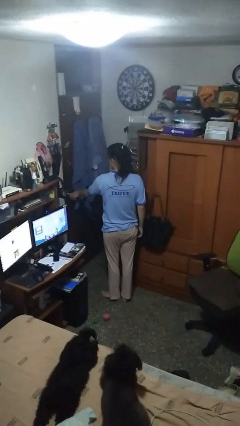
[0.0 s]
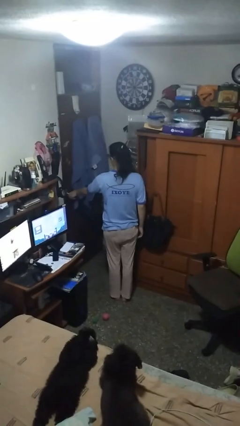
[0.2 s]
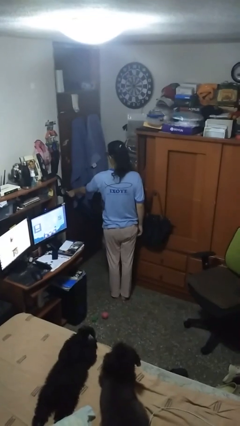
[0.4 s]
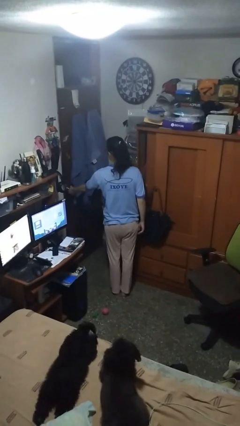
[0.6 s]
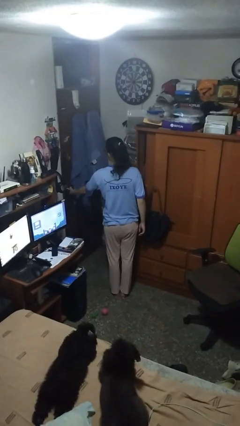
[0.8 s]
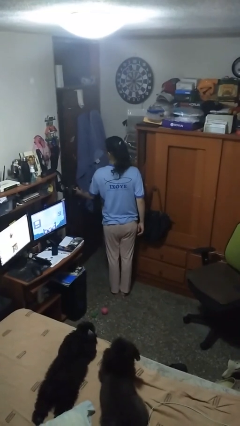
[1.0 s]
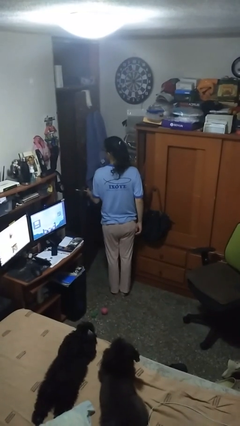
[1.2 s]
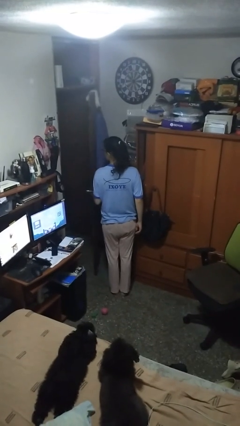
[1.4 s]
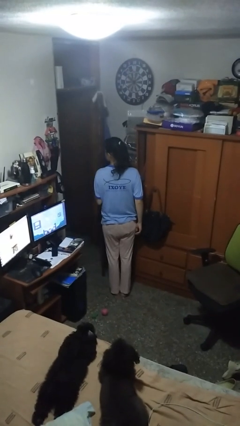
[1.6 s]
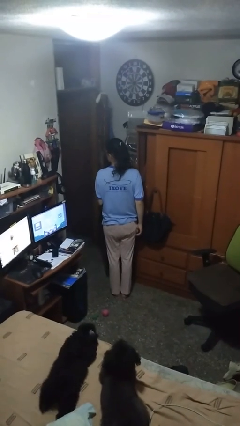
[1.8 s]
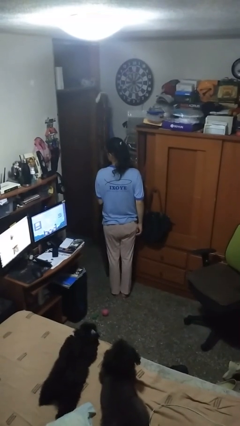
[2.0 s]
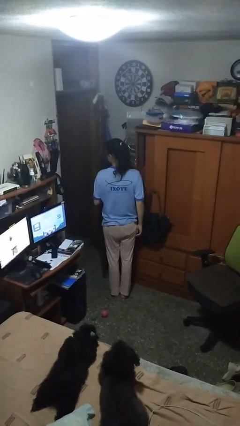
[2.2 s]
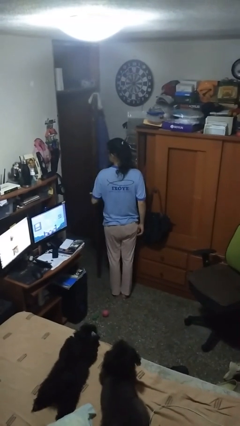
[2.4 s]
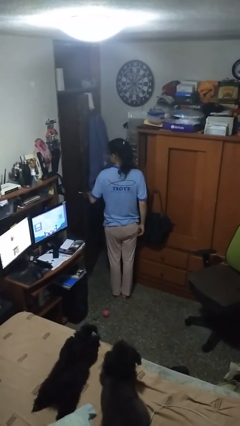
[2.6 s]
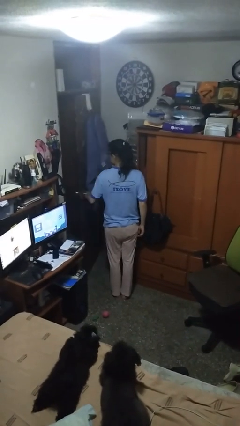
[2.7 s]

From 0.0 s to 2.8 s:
person opens facility door

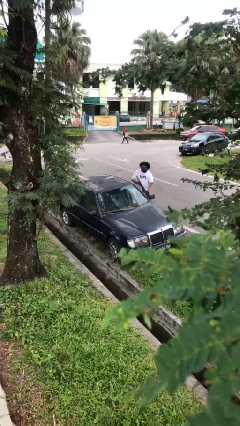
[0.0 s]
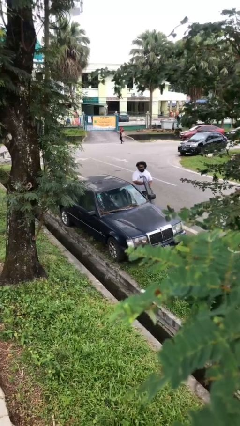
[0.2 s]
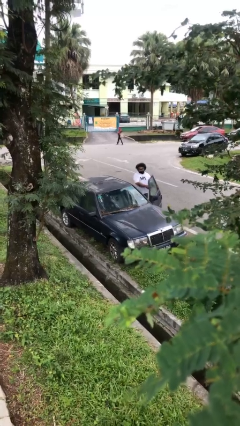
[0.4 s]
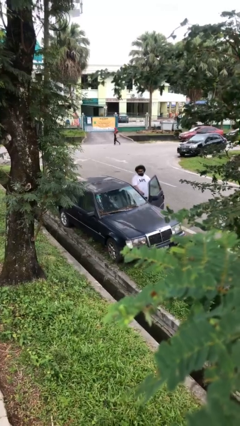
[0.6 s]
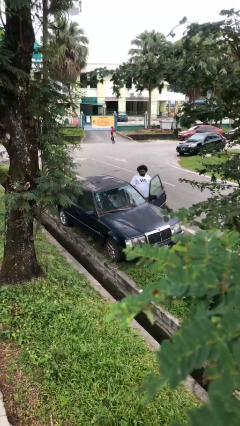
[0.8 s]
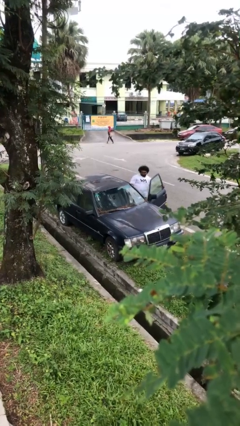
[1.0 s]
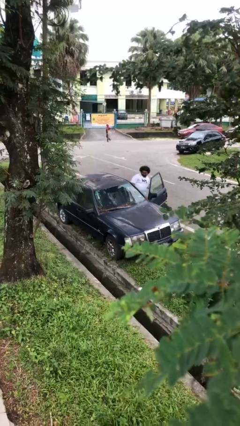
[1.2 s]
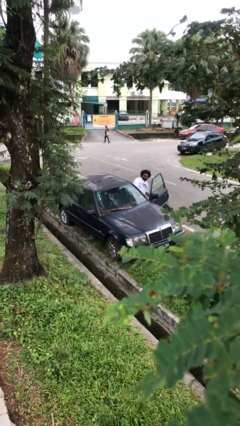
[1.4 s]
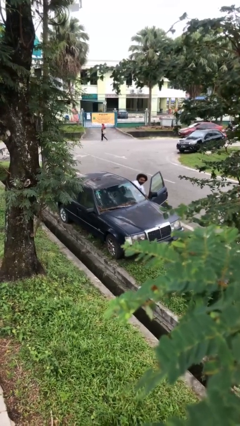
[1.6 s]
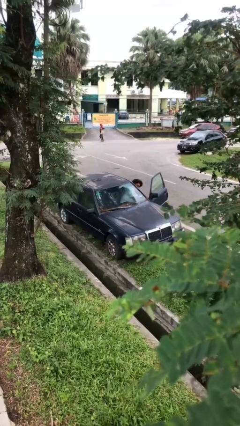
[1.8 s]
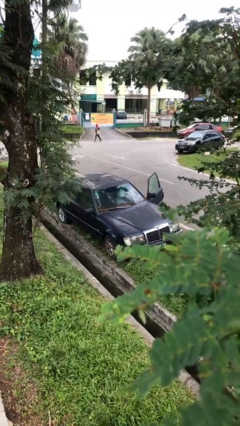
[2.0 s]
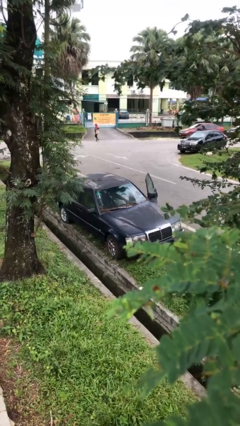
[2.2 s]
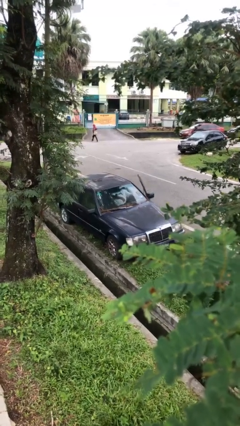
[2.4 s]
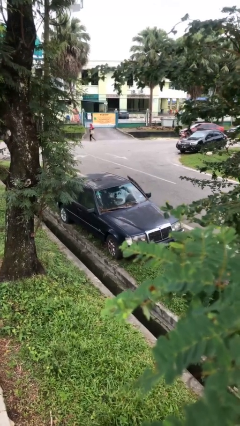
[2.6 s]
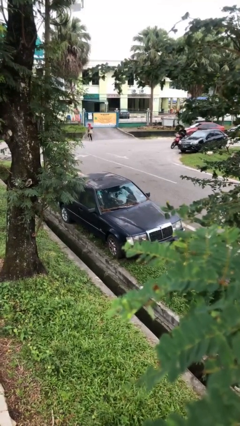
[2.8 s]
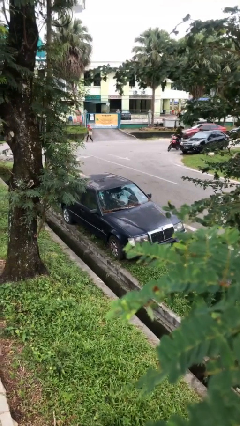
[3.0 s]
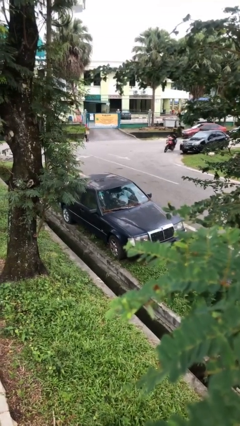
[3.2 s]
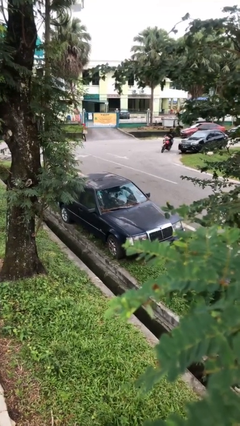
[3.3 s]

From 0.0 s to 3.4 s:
car picks up person

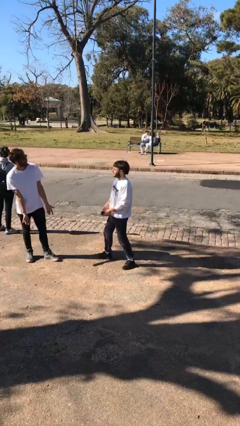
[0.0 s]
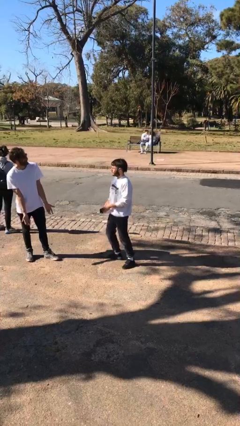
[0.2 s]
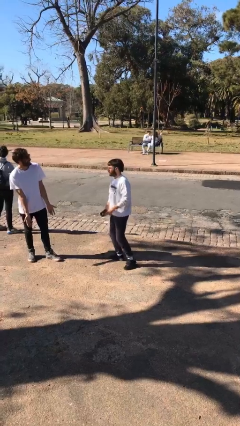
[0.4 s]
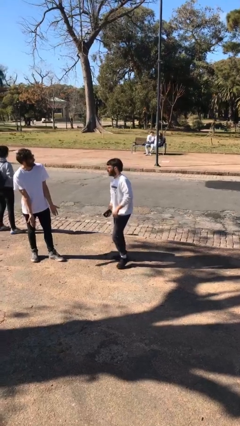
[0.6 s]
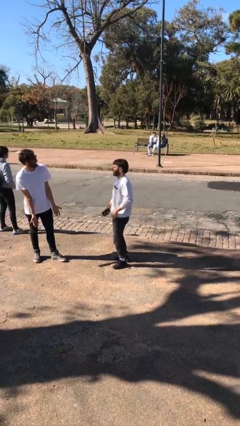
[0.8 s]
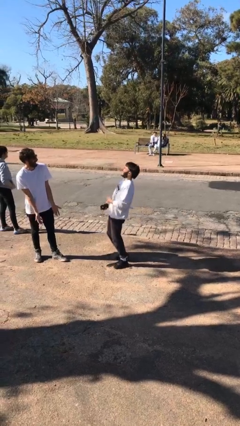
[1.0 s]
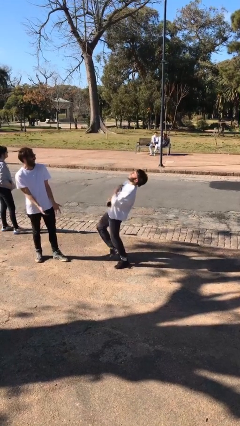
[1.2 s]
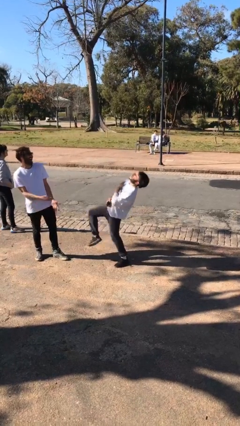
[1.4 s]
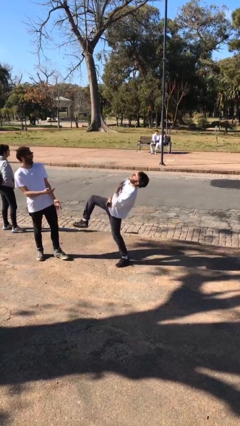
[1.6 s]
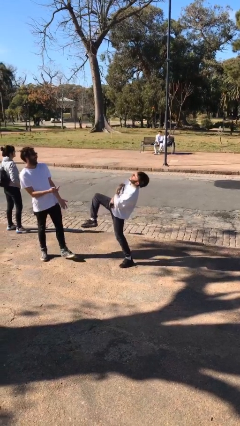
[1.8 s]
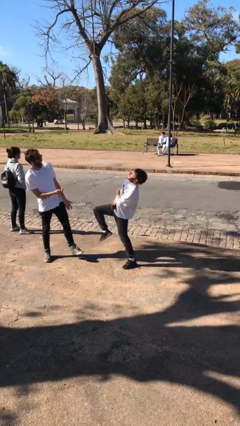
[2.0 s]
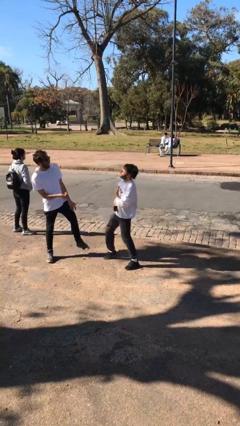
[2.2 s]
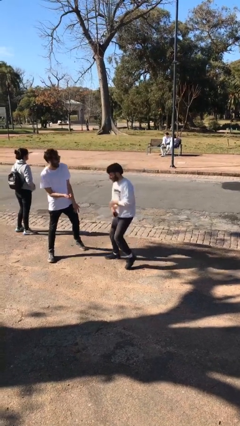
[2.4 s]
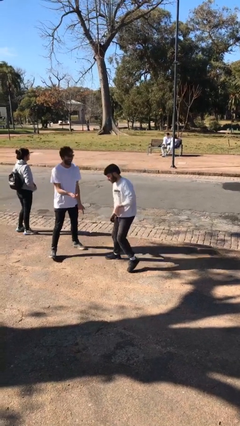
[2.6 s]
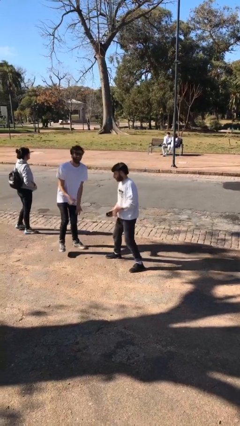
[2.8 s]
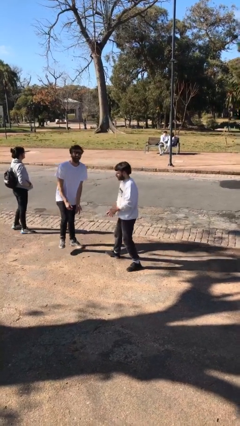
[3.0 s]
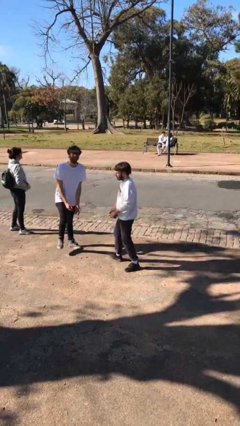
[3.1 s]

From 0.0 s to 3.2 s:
person laughs with person

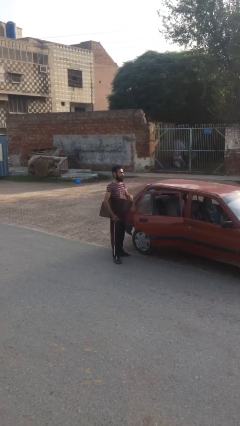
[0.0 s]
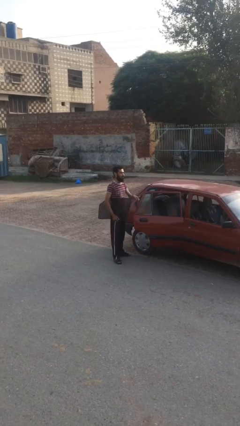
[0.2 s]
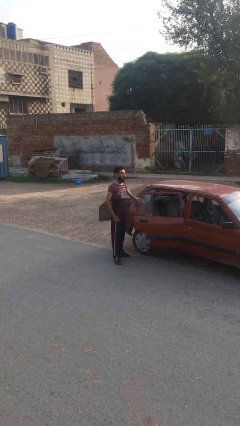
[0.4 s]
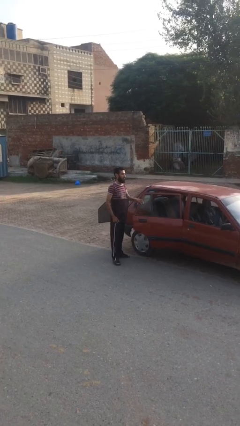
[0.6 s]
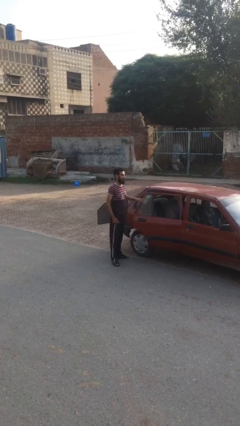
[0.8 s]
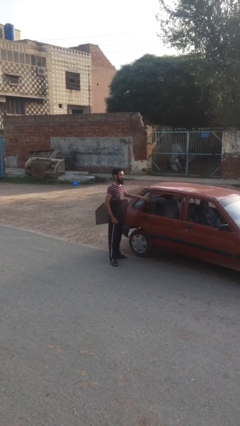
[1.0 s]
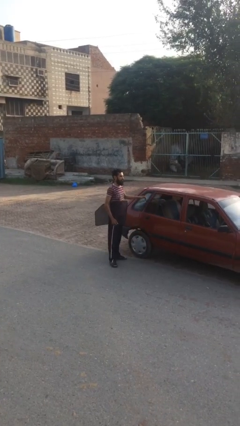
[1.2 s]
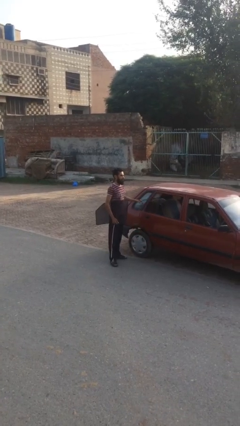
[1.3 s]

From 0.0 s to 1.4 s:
person closes car door

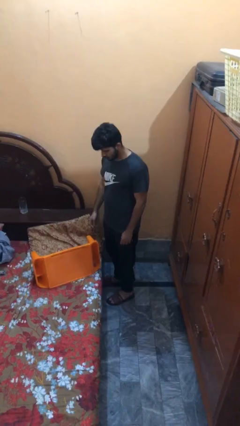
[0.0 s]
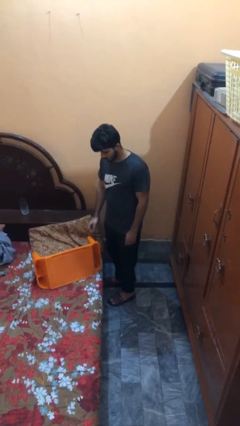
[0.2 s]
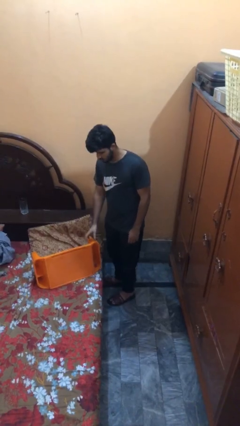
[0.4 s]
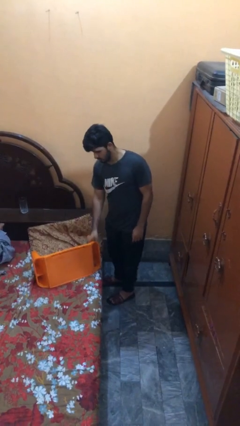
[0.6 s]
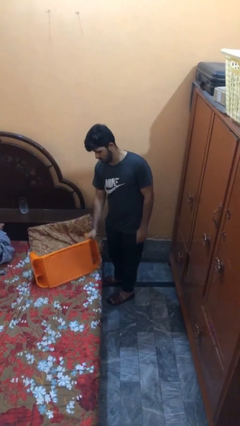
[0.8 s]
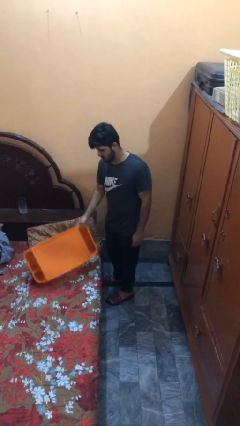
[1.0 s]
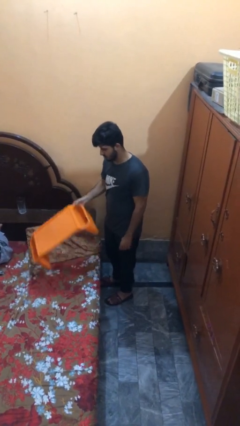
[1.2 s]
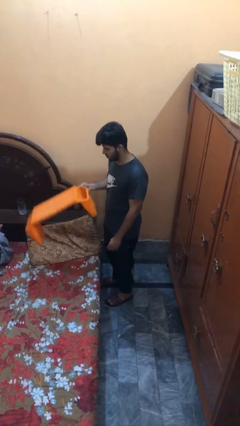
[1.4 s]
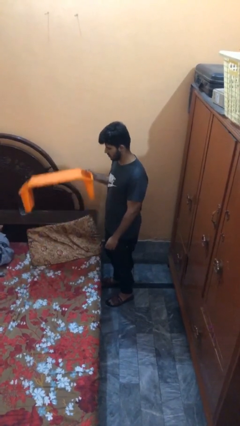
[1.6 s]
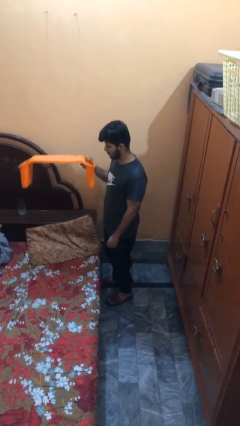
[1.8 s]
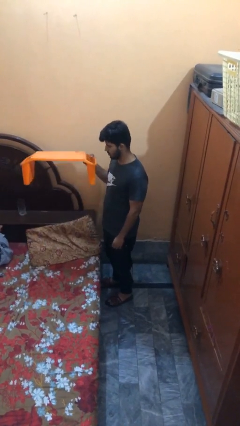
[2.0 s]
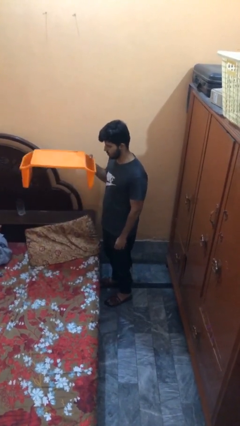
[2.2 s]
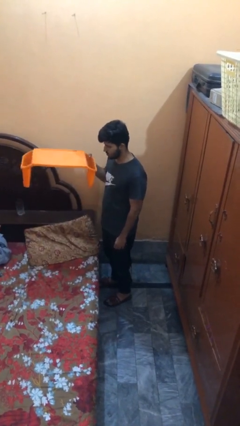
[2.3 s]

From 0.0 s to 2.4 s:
person picks up object from bed

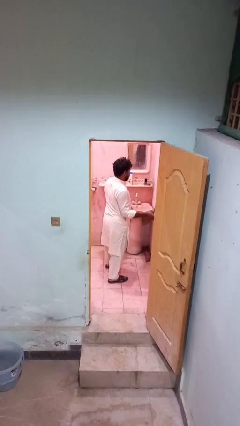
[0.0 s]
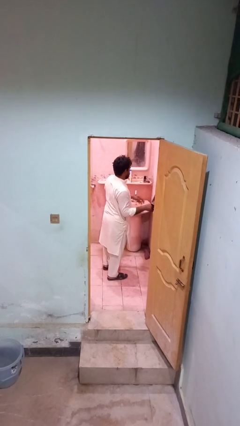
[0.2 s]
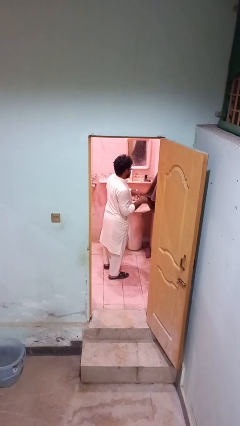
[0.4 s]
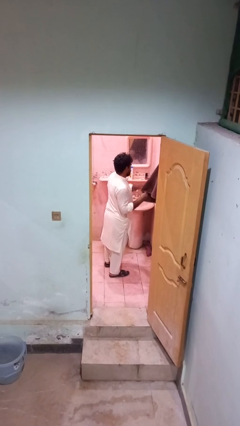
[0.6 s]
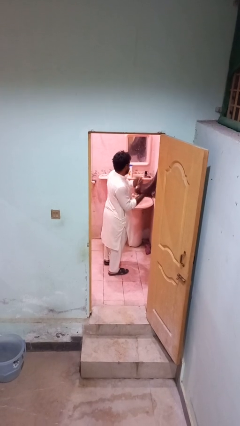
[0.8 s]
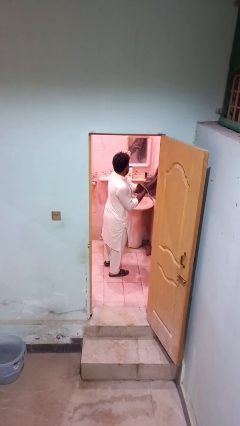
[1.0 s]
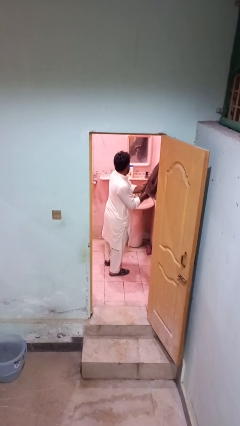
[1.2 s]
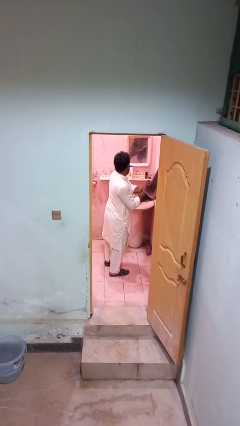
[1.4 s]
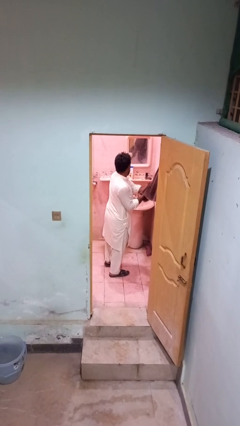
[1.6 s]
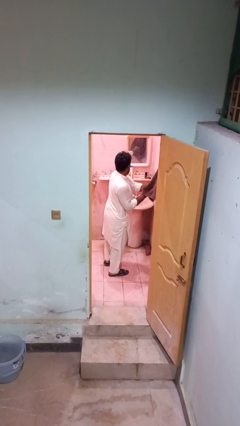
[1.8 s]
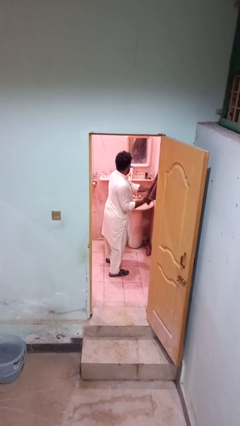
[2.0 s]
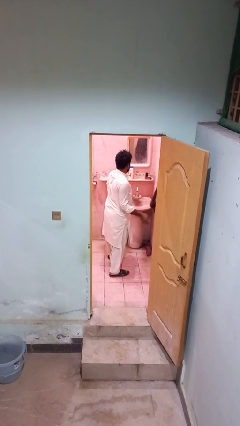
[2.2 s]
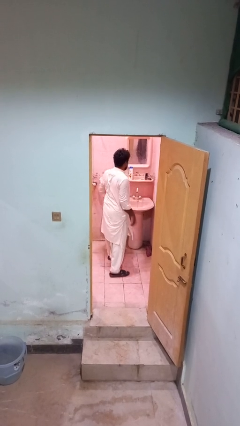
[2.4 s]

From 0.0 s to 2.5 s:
person dries hands with towel

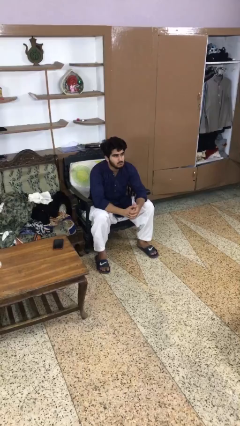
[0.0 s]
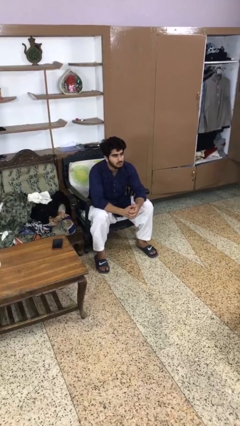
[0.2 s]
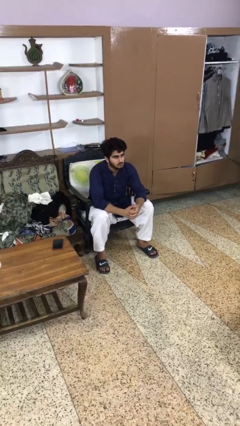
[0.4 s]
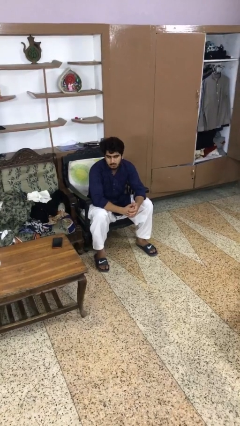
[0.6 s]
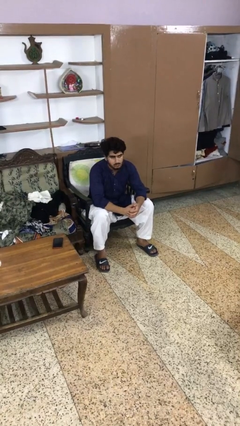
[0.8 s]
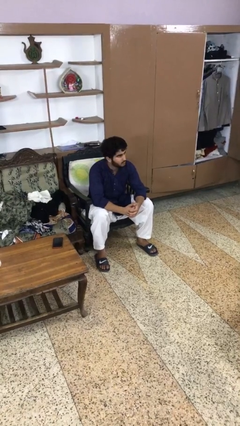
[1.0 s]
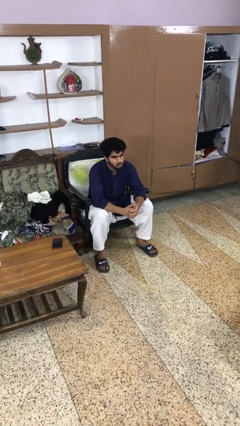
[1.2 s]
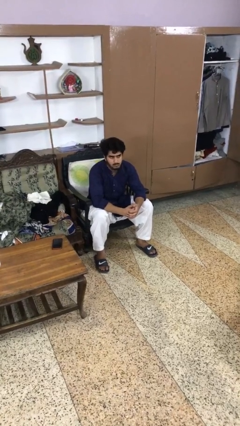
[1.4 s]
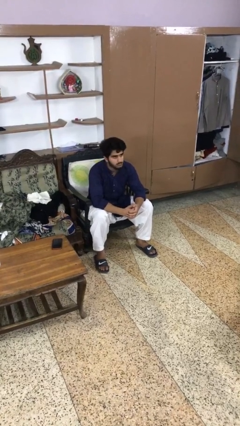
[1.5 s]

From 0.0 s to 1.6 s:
person shakes head
